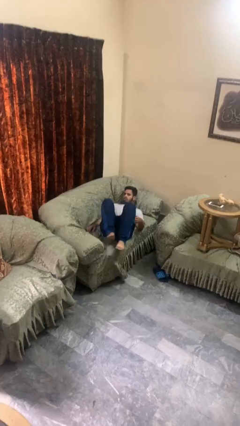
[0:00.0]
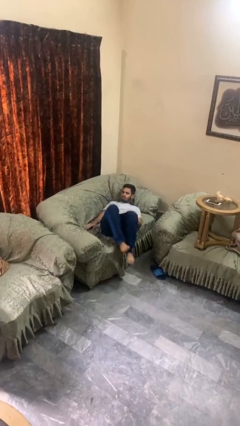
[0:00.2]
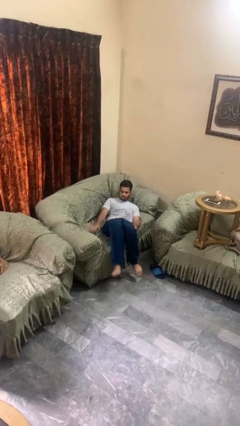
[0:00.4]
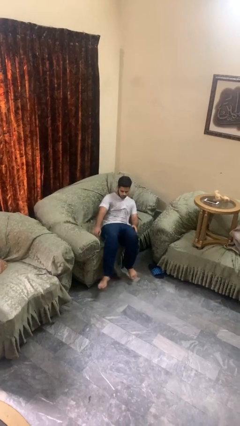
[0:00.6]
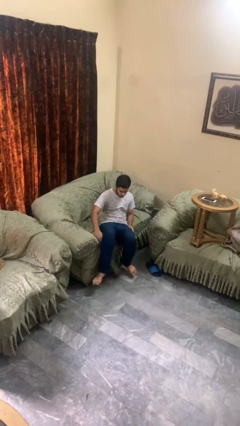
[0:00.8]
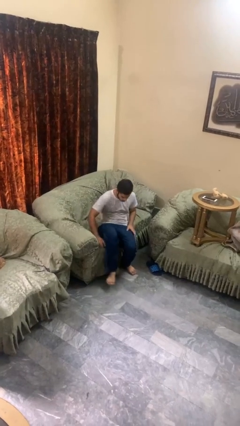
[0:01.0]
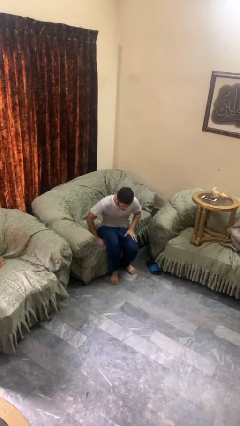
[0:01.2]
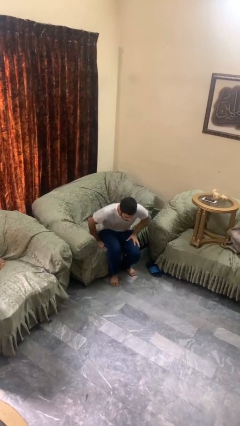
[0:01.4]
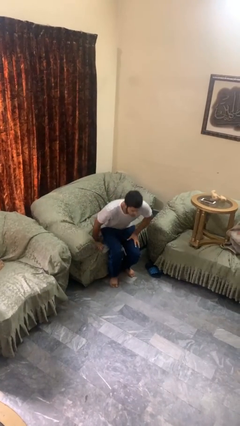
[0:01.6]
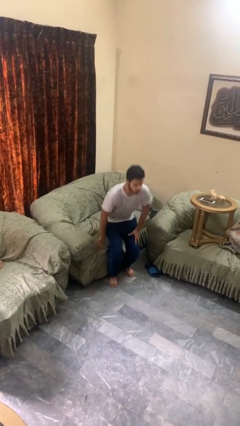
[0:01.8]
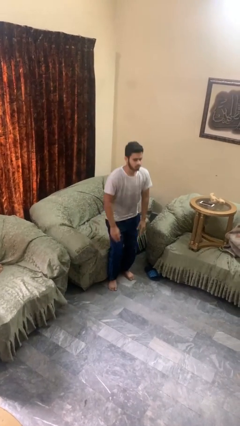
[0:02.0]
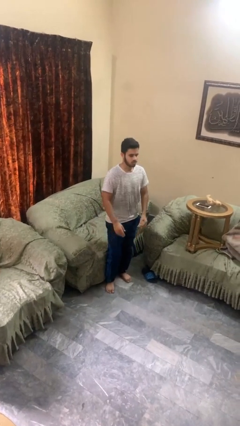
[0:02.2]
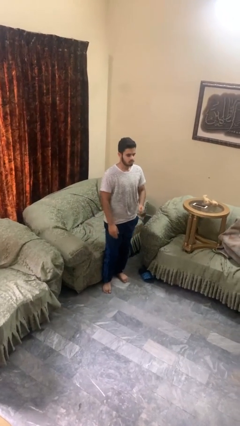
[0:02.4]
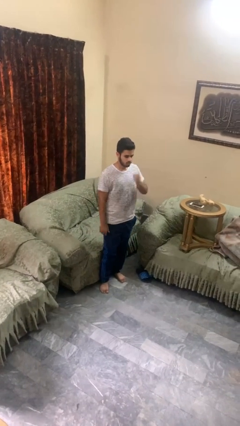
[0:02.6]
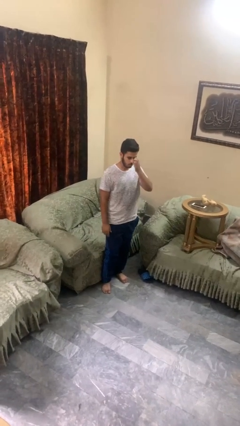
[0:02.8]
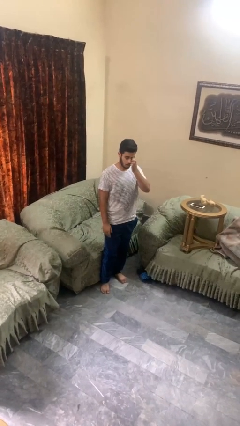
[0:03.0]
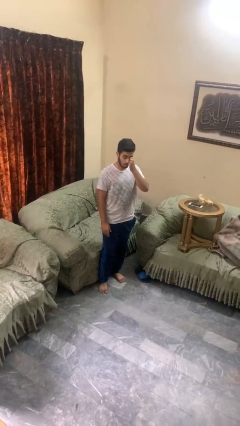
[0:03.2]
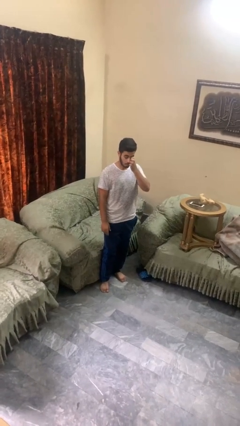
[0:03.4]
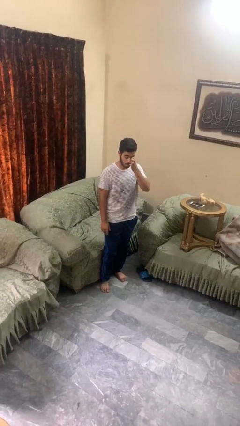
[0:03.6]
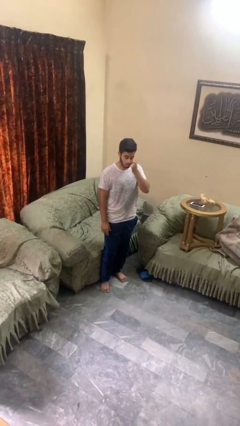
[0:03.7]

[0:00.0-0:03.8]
person stands up

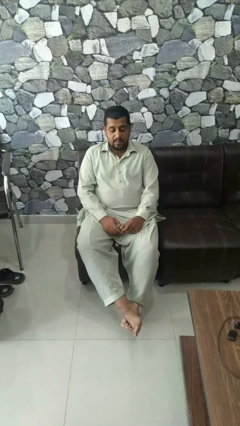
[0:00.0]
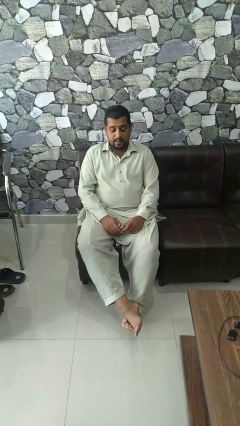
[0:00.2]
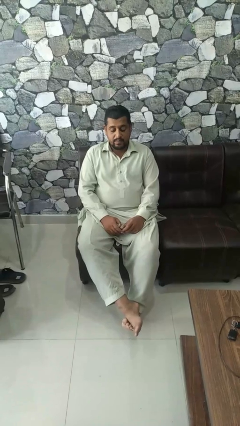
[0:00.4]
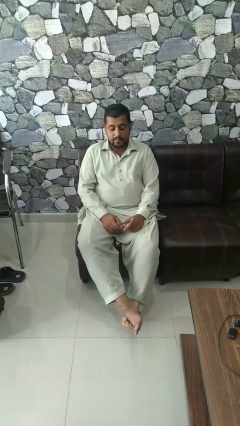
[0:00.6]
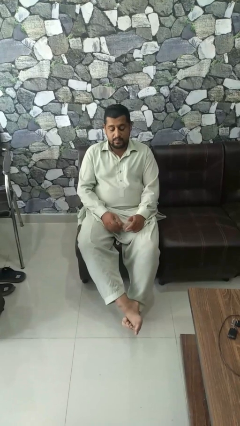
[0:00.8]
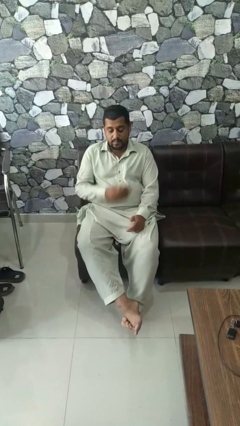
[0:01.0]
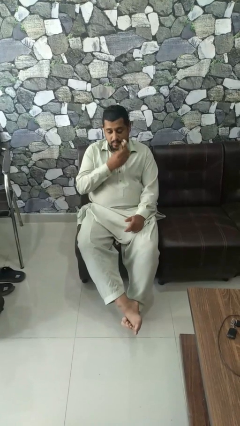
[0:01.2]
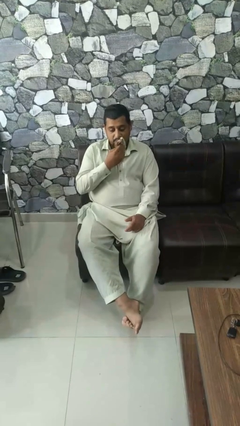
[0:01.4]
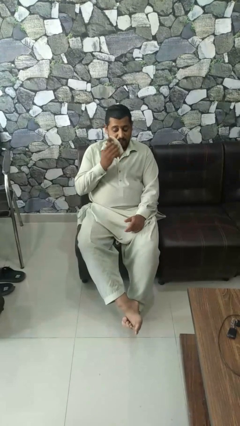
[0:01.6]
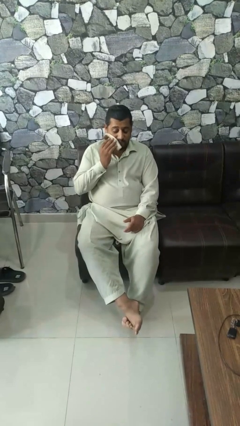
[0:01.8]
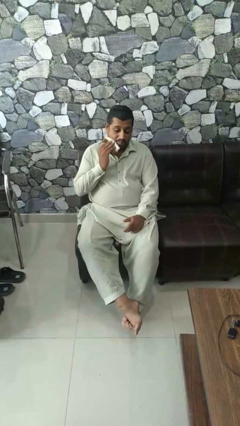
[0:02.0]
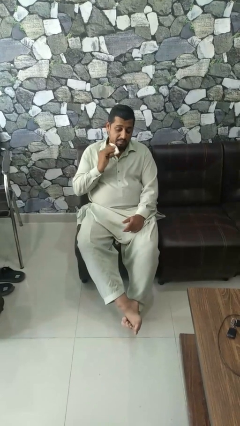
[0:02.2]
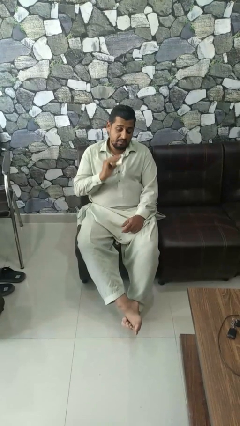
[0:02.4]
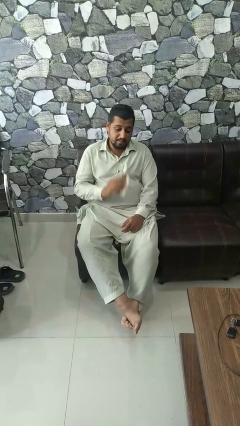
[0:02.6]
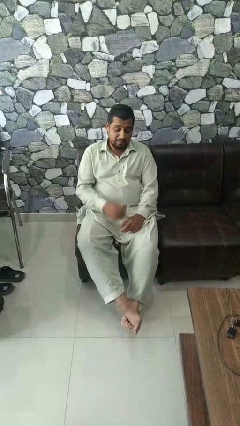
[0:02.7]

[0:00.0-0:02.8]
person wipes mouth with napkin

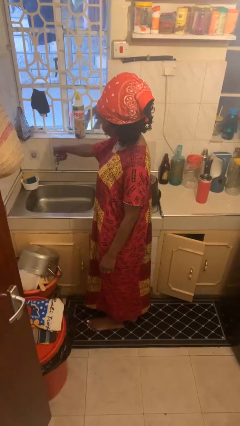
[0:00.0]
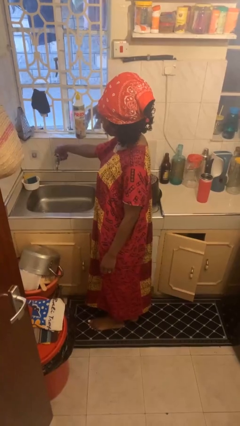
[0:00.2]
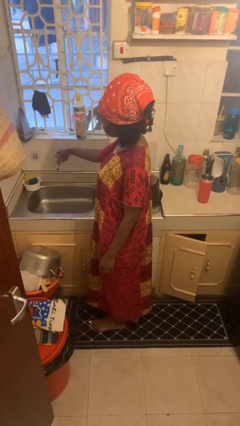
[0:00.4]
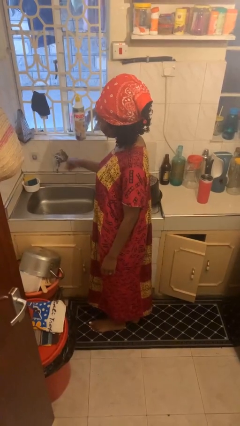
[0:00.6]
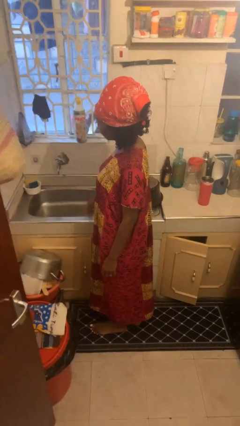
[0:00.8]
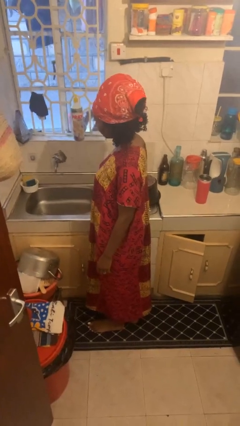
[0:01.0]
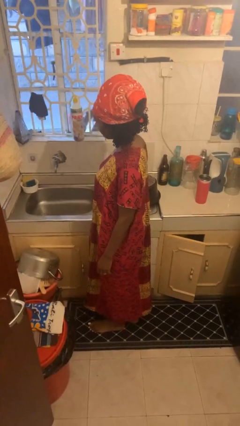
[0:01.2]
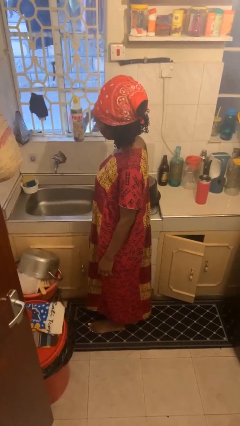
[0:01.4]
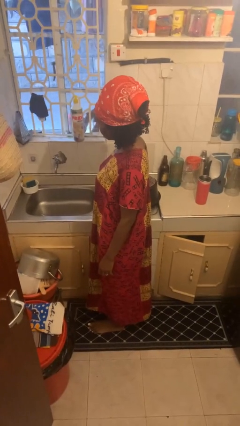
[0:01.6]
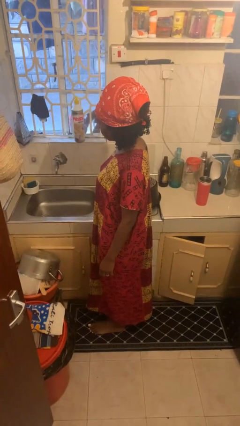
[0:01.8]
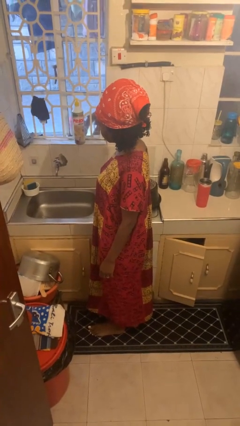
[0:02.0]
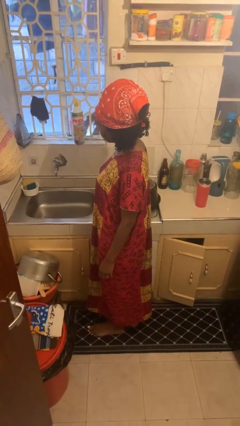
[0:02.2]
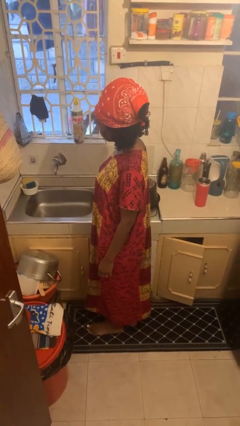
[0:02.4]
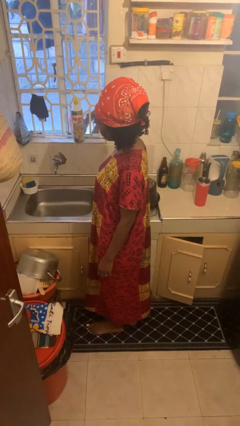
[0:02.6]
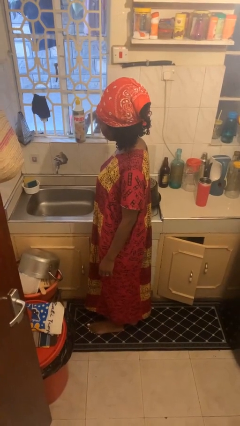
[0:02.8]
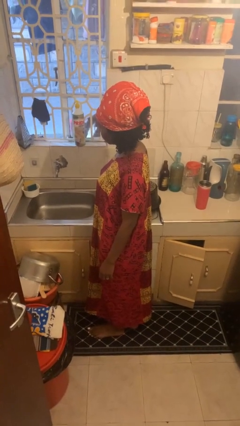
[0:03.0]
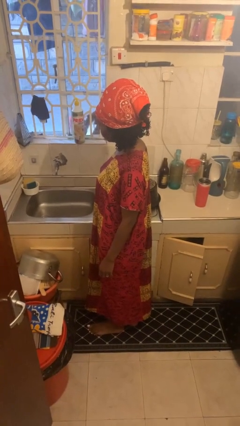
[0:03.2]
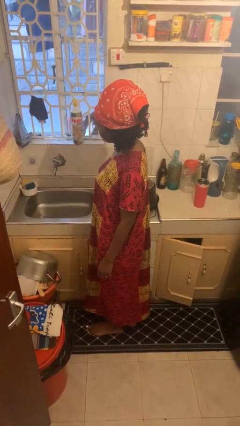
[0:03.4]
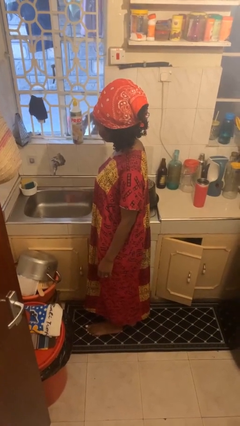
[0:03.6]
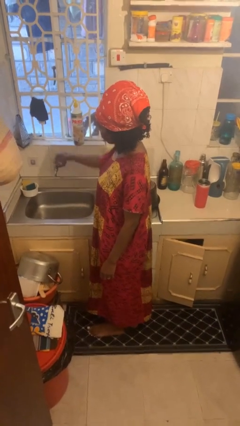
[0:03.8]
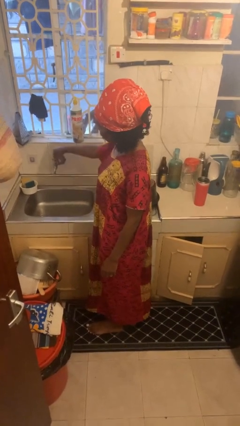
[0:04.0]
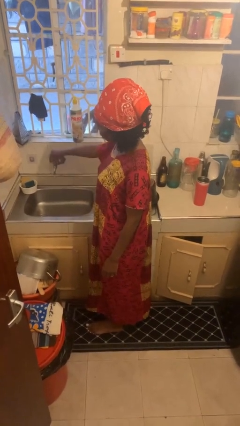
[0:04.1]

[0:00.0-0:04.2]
person turns off faucet

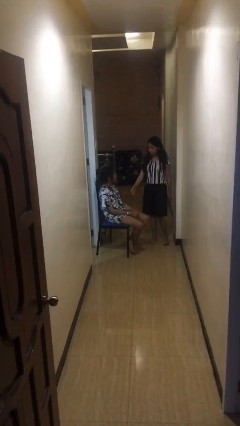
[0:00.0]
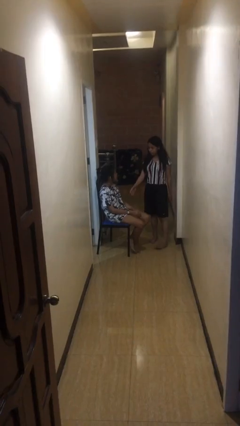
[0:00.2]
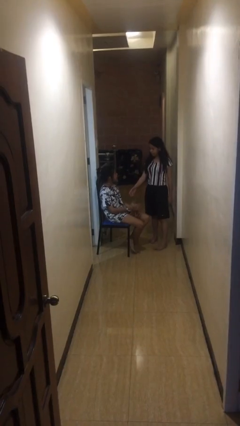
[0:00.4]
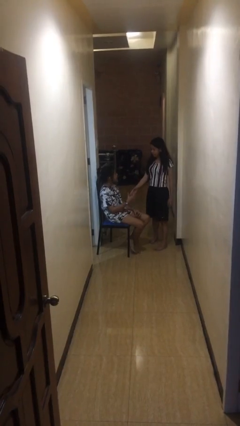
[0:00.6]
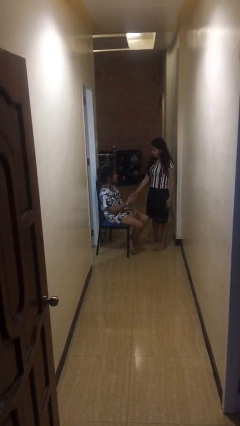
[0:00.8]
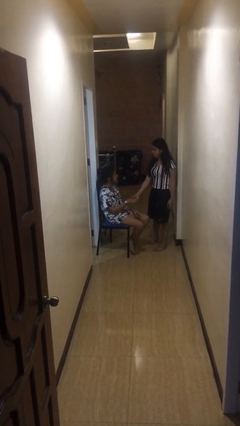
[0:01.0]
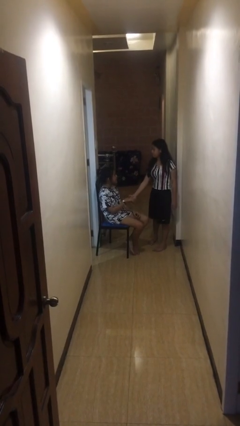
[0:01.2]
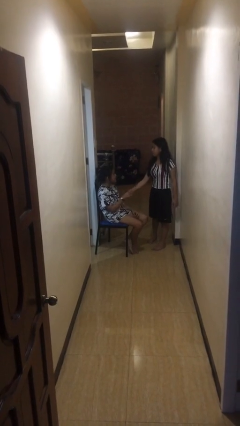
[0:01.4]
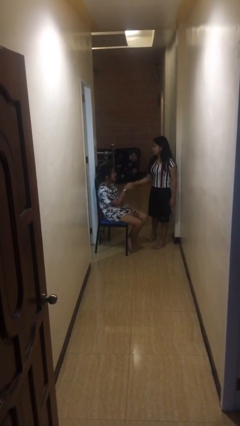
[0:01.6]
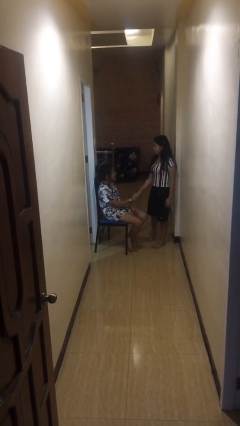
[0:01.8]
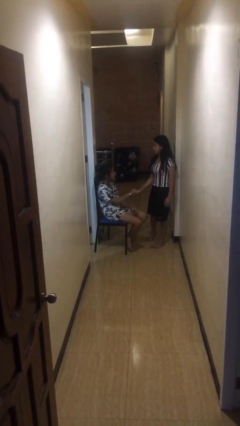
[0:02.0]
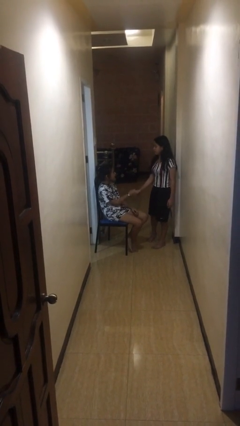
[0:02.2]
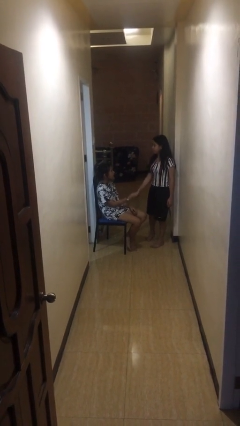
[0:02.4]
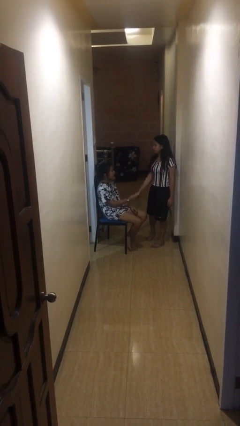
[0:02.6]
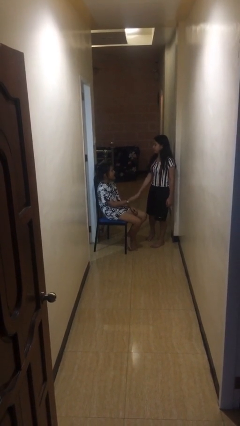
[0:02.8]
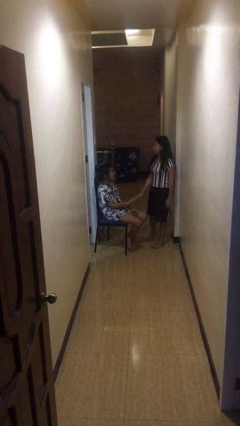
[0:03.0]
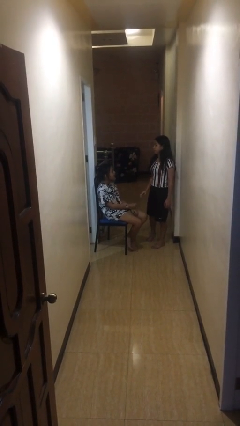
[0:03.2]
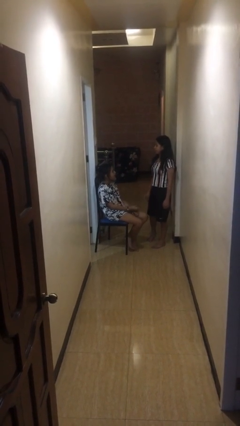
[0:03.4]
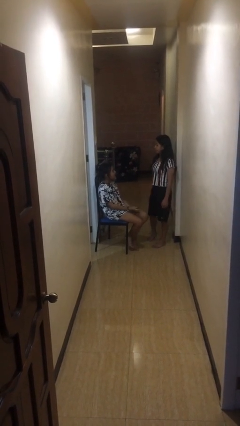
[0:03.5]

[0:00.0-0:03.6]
person shakes hand

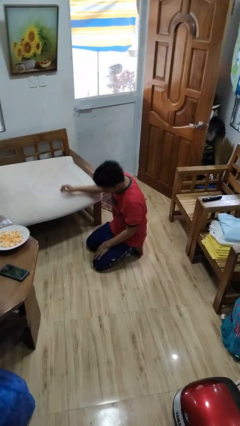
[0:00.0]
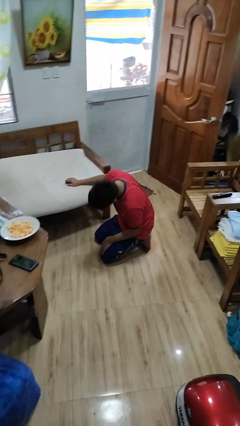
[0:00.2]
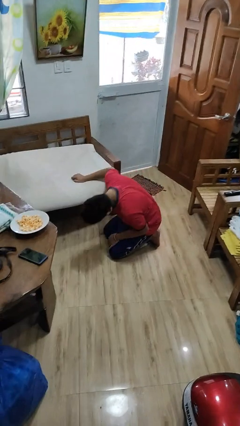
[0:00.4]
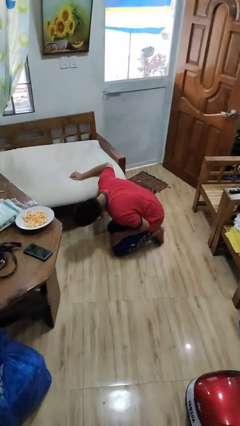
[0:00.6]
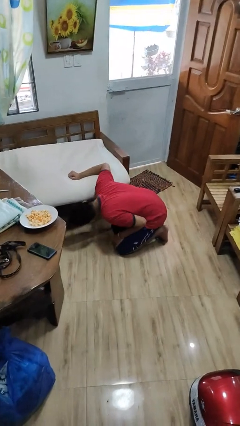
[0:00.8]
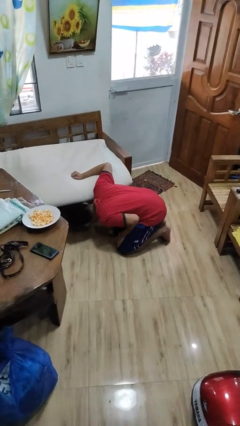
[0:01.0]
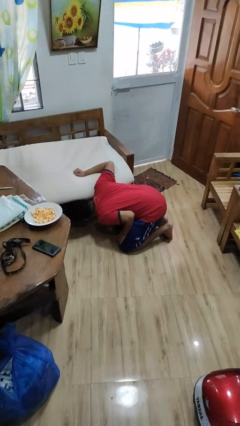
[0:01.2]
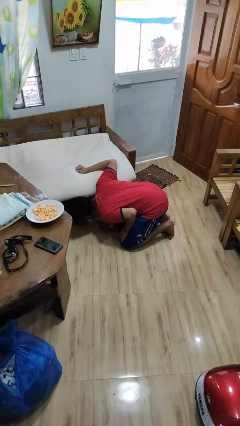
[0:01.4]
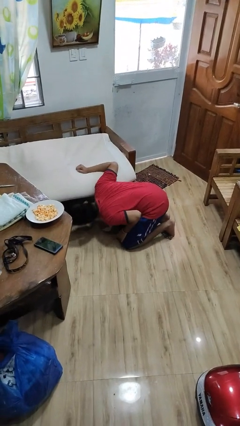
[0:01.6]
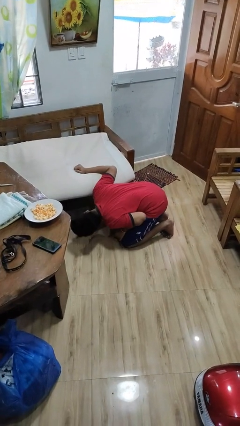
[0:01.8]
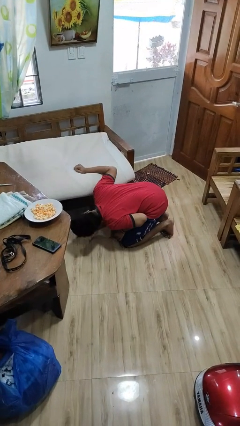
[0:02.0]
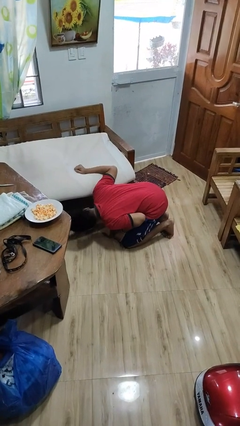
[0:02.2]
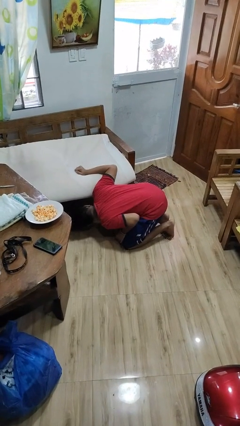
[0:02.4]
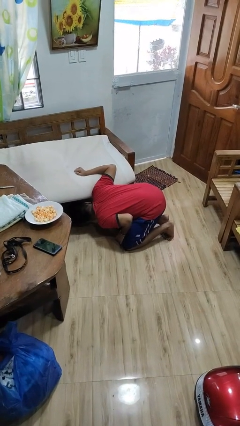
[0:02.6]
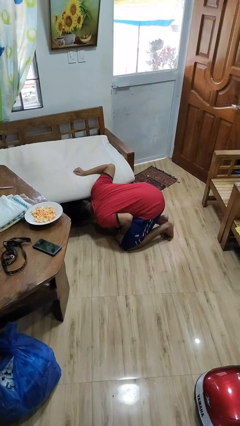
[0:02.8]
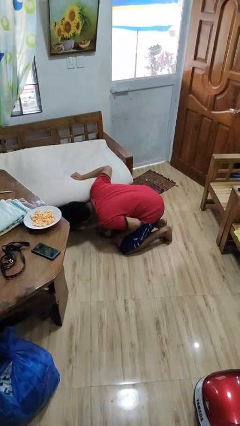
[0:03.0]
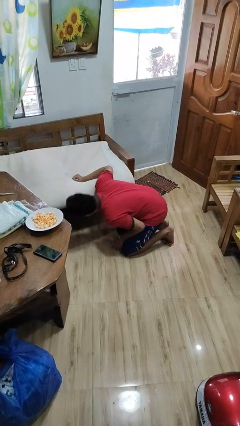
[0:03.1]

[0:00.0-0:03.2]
person searches under couch

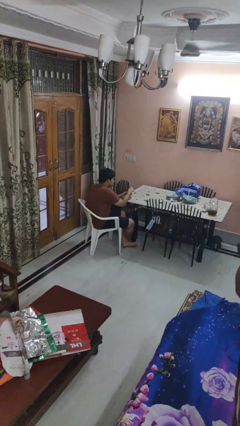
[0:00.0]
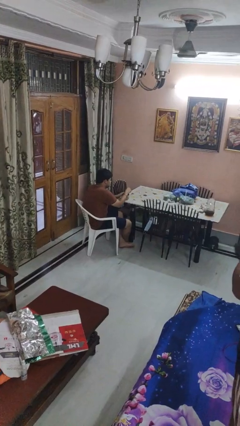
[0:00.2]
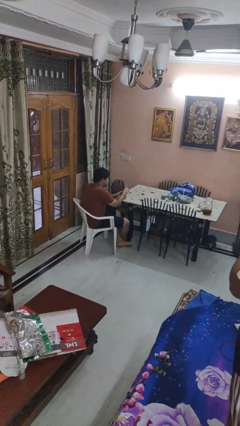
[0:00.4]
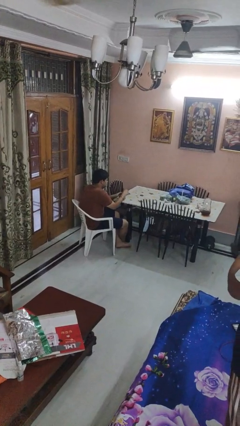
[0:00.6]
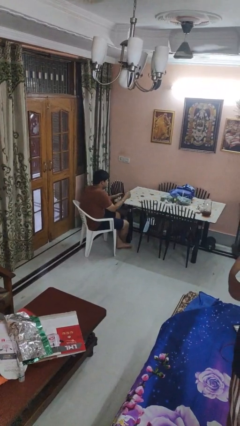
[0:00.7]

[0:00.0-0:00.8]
person stirs mug
